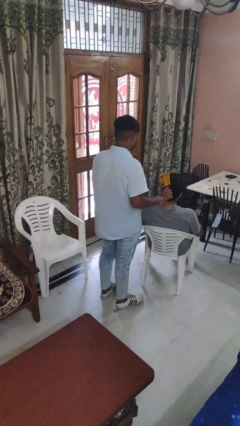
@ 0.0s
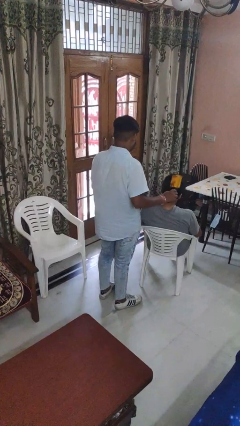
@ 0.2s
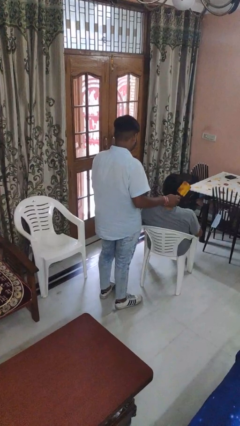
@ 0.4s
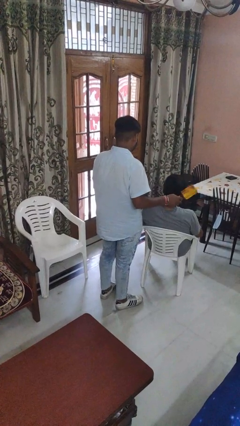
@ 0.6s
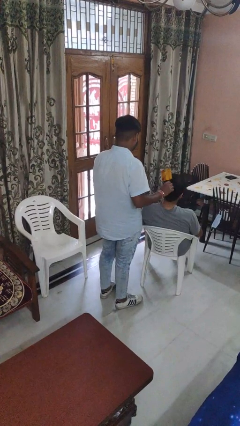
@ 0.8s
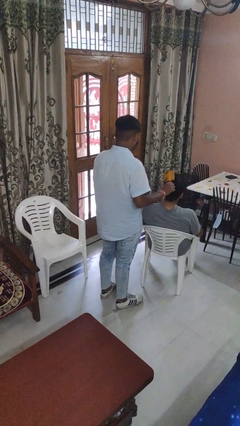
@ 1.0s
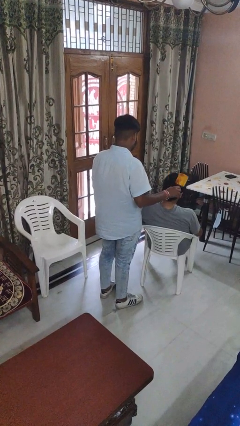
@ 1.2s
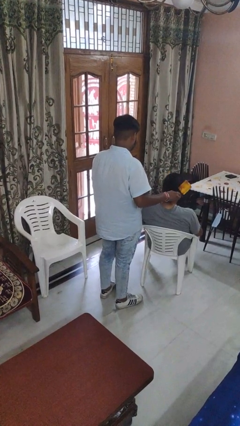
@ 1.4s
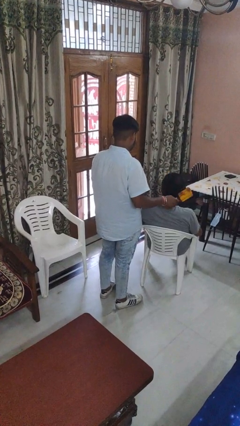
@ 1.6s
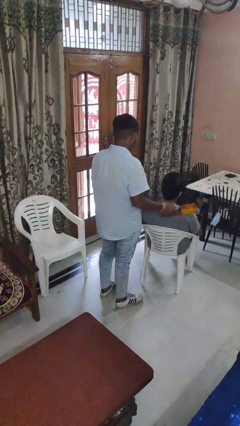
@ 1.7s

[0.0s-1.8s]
person brushes hair of person

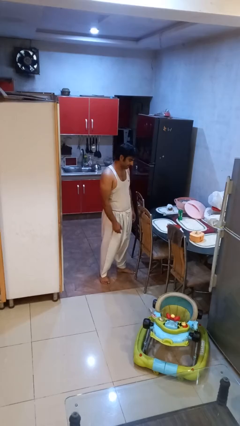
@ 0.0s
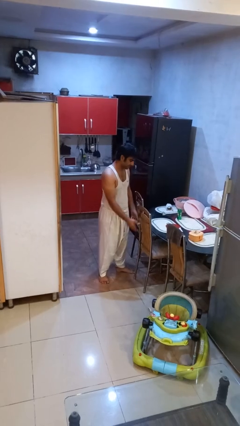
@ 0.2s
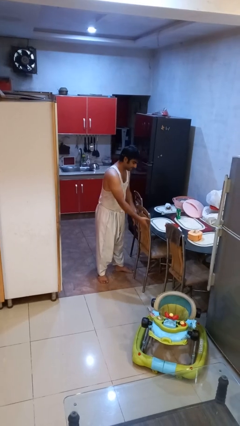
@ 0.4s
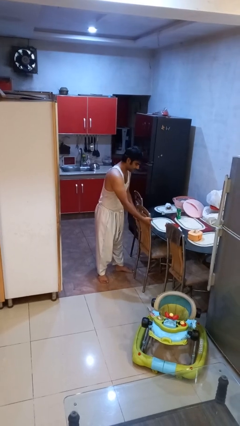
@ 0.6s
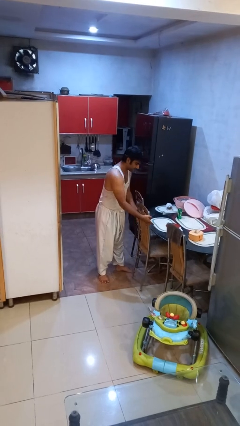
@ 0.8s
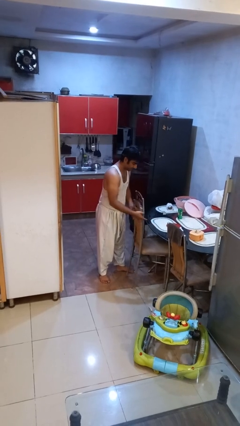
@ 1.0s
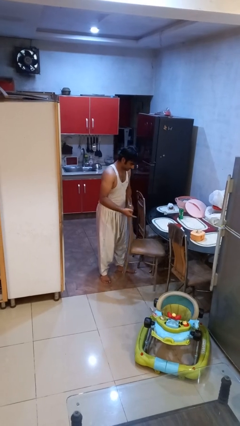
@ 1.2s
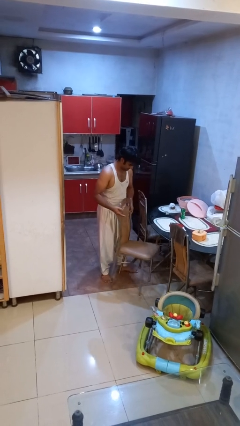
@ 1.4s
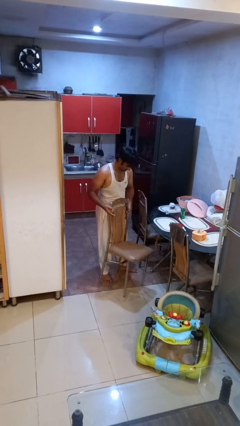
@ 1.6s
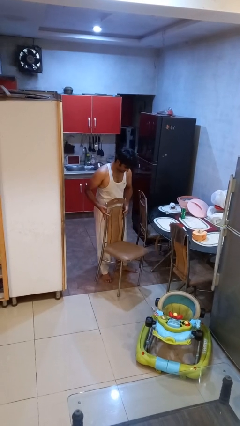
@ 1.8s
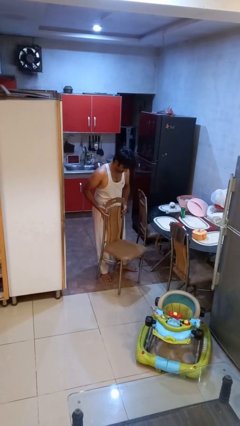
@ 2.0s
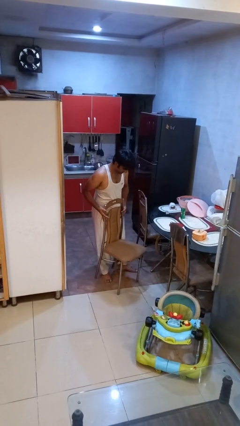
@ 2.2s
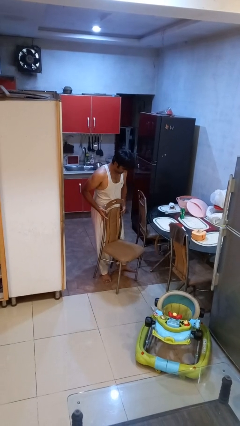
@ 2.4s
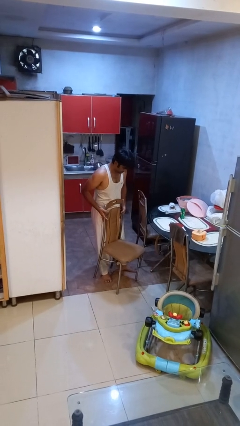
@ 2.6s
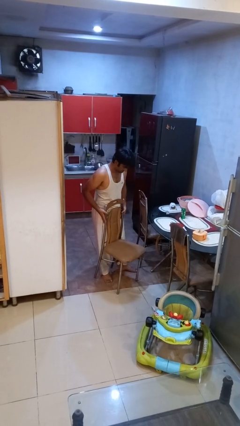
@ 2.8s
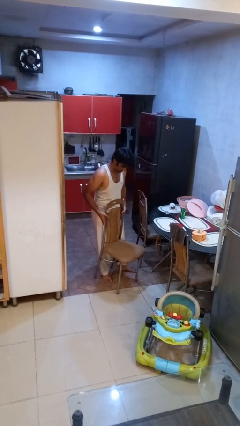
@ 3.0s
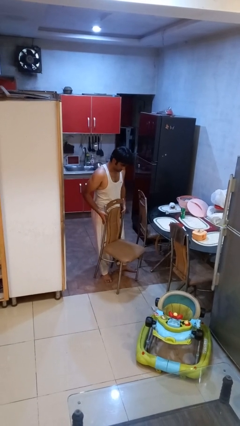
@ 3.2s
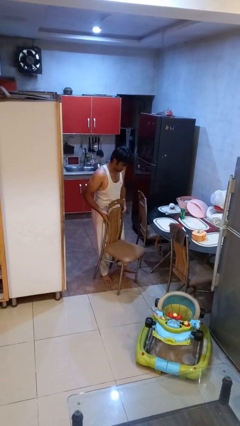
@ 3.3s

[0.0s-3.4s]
person pulls out chair

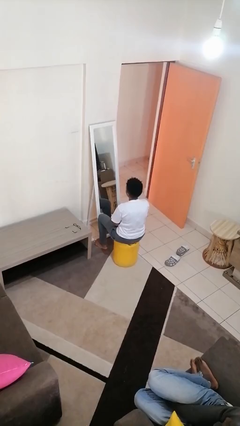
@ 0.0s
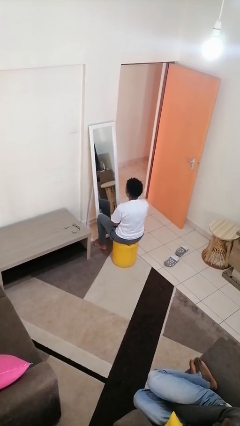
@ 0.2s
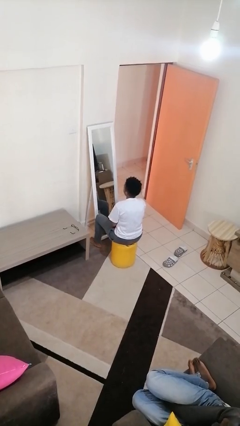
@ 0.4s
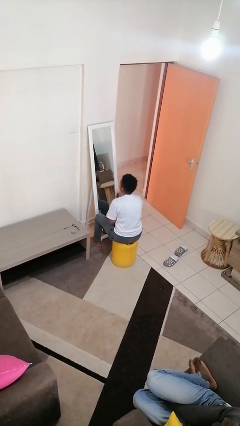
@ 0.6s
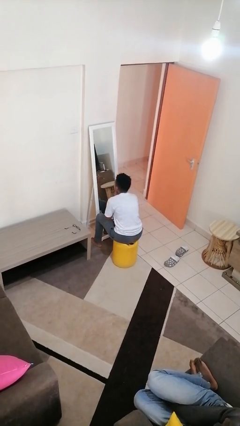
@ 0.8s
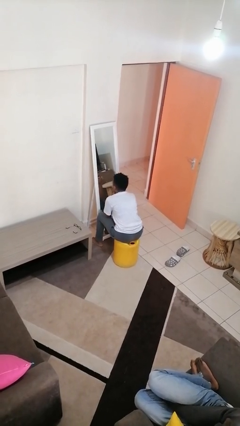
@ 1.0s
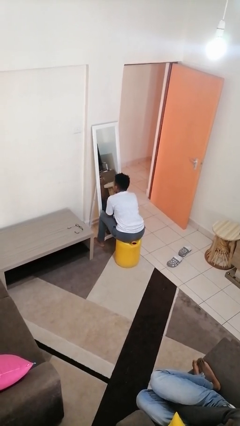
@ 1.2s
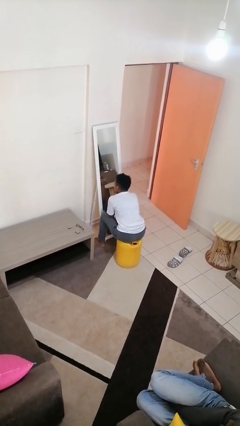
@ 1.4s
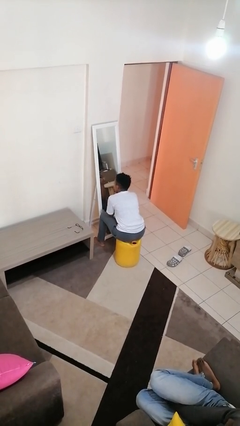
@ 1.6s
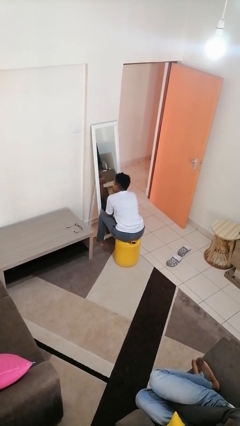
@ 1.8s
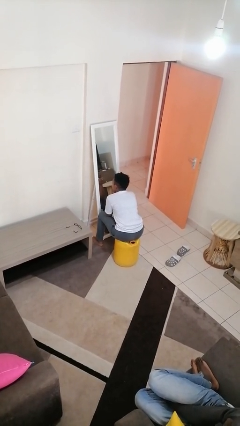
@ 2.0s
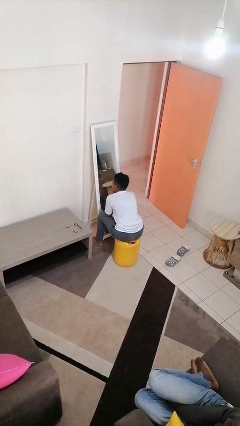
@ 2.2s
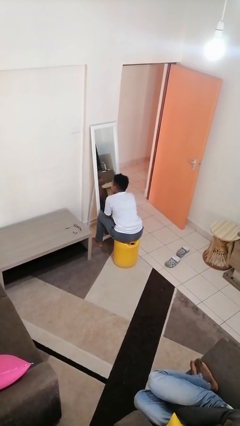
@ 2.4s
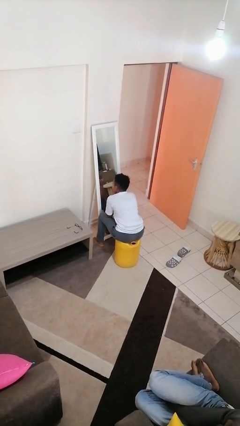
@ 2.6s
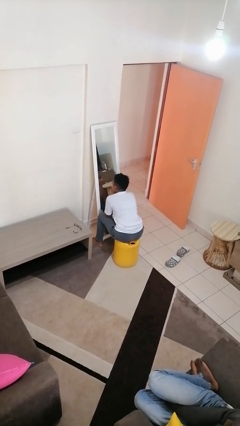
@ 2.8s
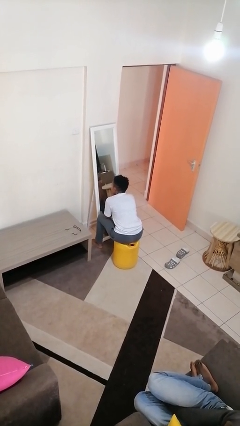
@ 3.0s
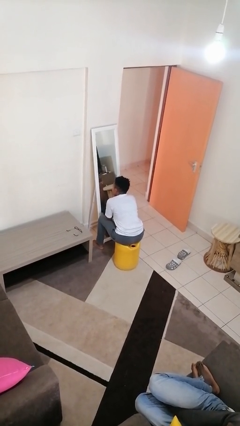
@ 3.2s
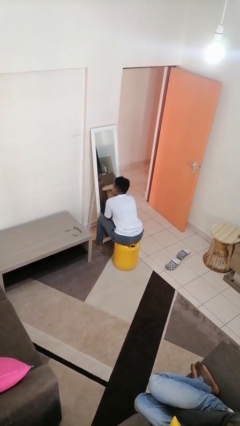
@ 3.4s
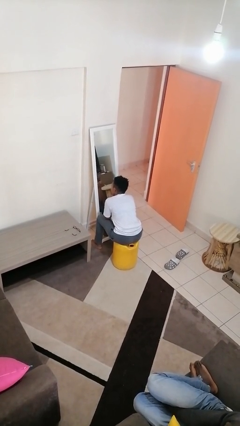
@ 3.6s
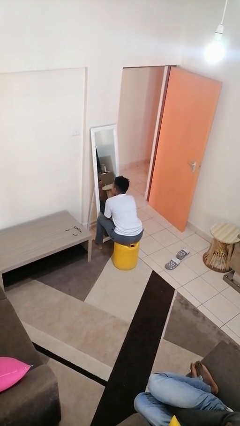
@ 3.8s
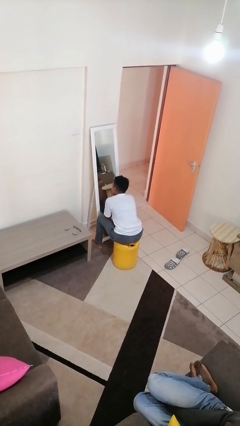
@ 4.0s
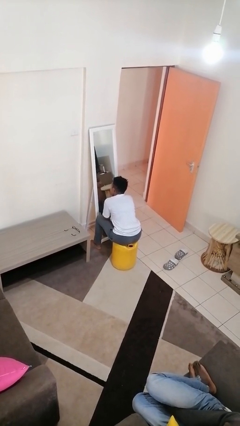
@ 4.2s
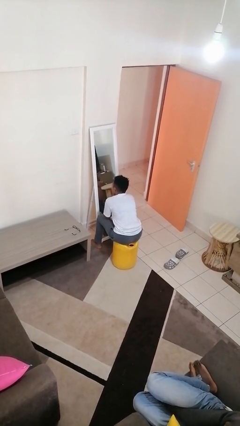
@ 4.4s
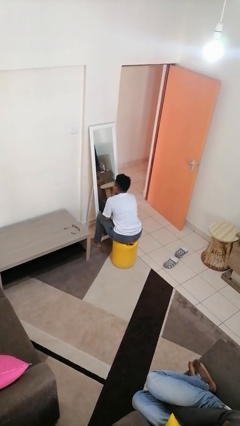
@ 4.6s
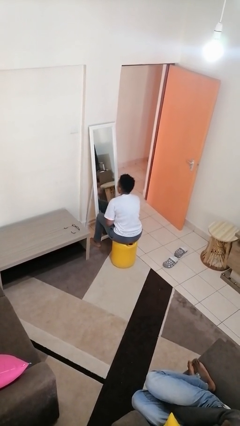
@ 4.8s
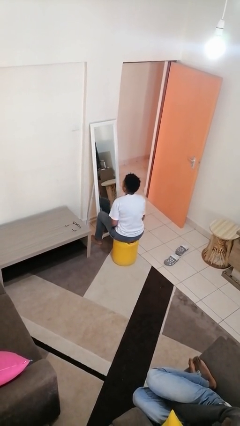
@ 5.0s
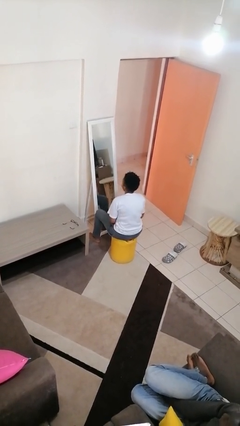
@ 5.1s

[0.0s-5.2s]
person applies eye makeup

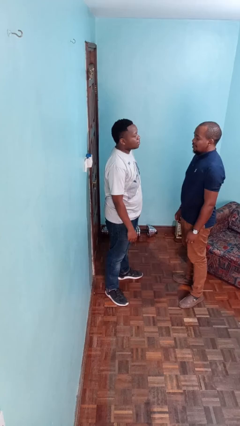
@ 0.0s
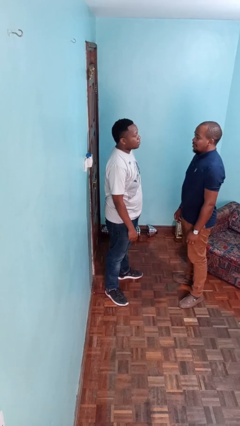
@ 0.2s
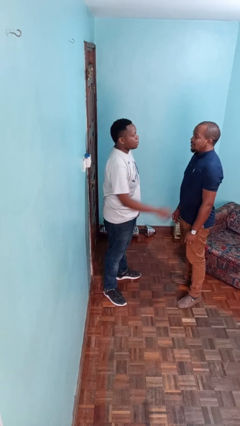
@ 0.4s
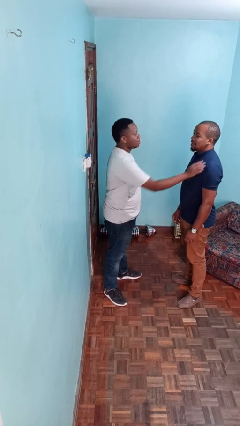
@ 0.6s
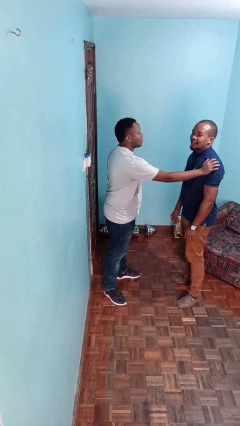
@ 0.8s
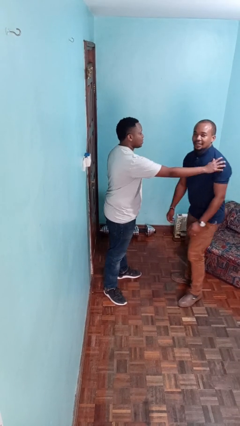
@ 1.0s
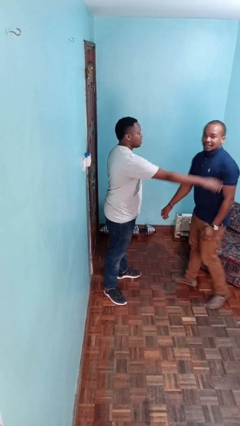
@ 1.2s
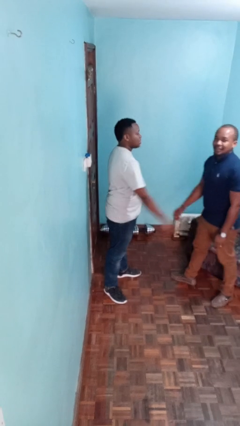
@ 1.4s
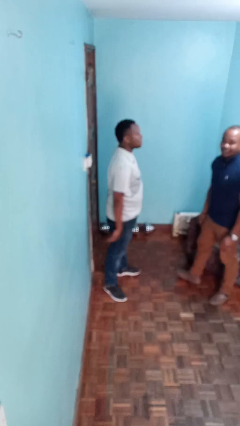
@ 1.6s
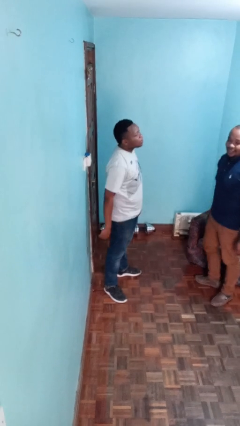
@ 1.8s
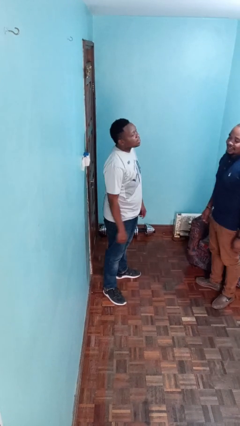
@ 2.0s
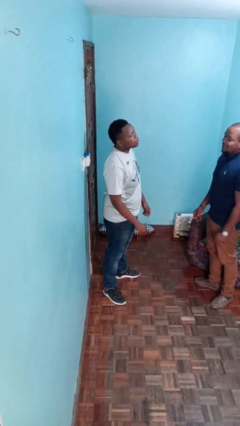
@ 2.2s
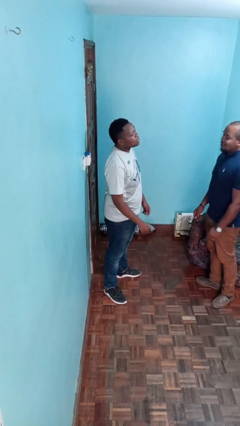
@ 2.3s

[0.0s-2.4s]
person shoves person

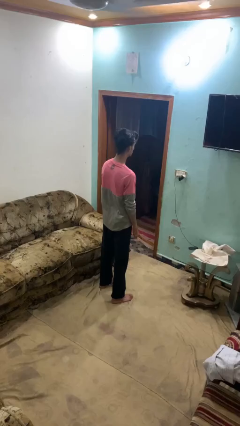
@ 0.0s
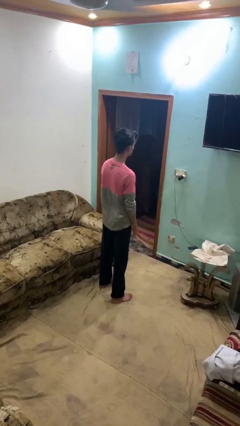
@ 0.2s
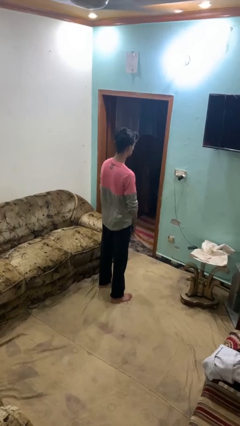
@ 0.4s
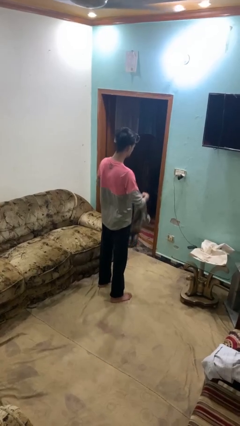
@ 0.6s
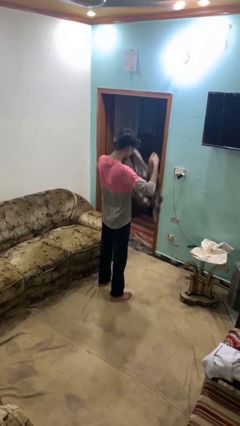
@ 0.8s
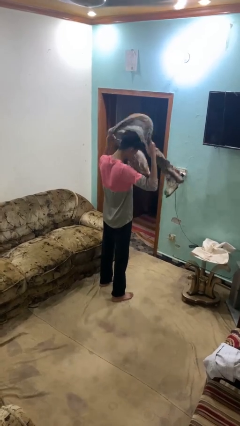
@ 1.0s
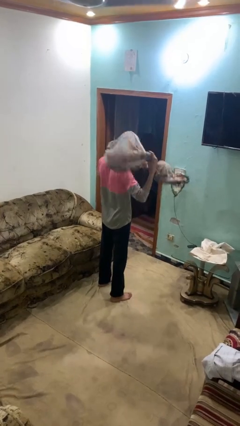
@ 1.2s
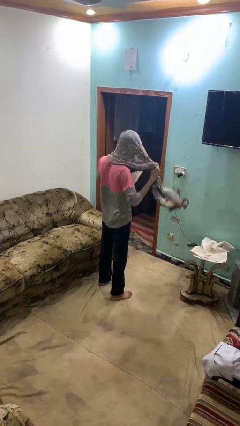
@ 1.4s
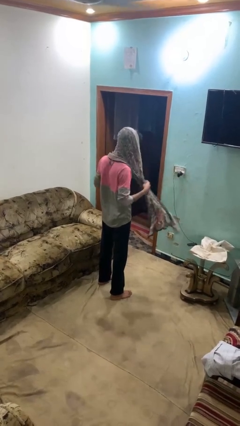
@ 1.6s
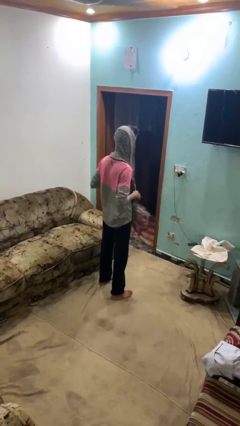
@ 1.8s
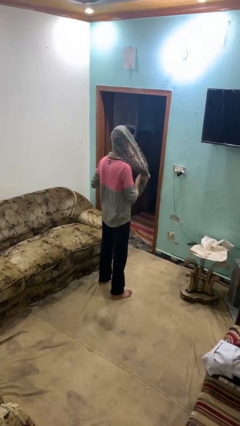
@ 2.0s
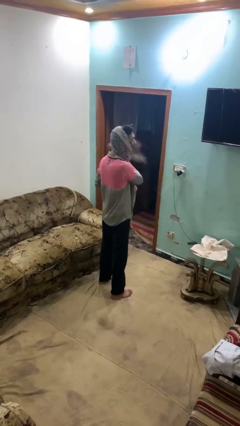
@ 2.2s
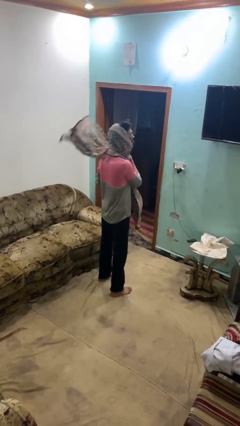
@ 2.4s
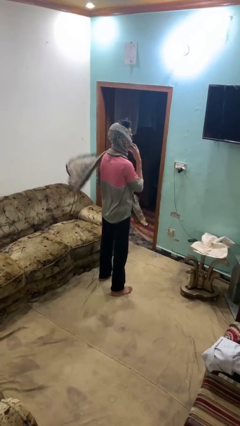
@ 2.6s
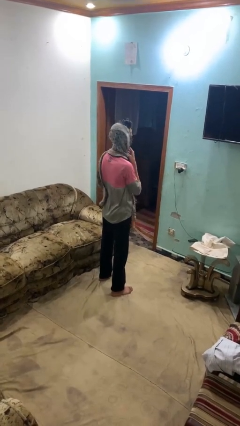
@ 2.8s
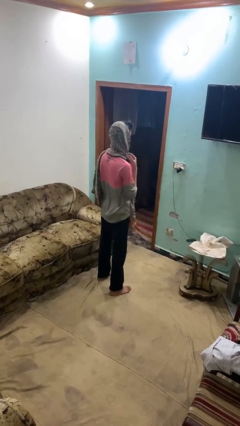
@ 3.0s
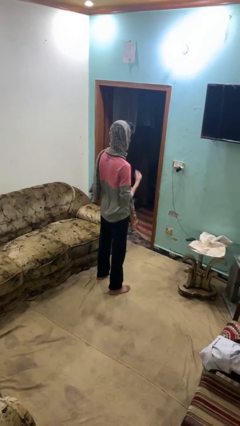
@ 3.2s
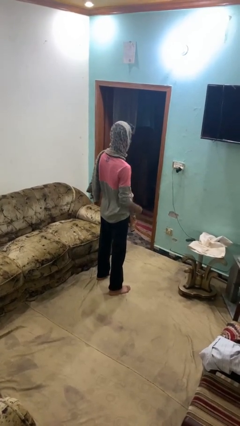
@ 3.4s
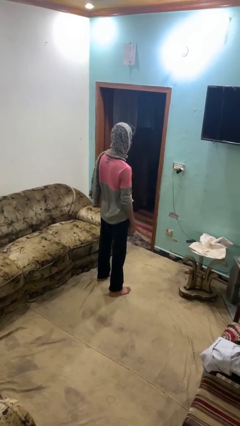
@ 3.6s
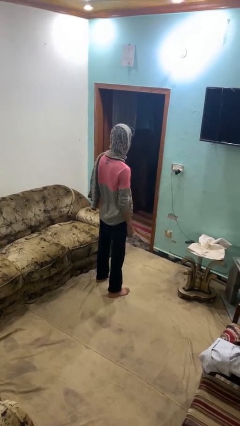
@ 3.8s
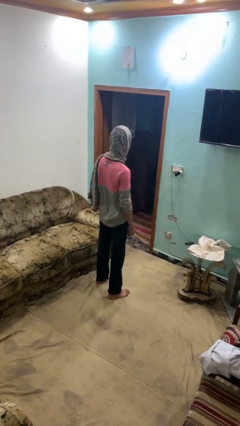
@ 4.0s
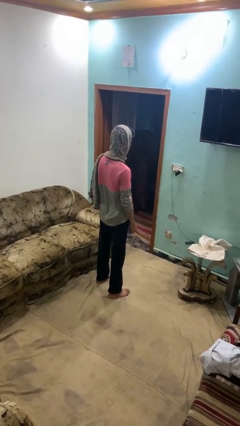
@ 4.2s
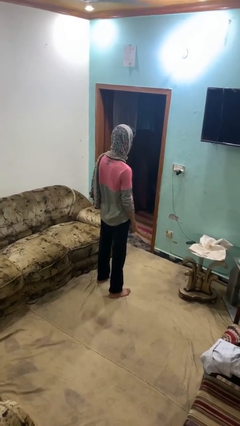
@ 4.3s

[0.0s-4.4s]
person puts on scarf
